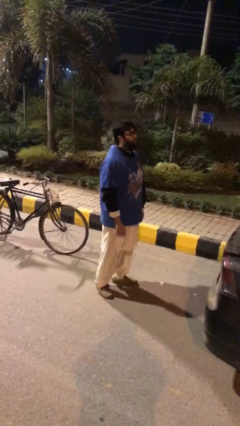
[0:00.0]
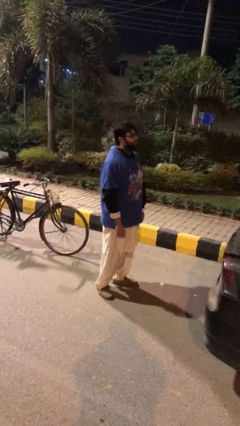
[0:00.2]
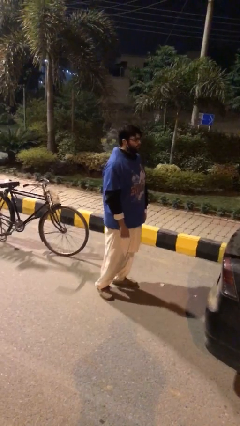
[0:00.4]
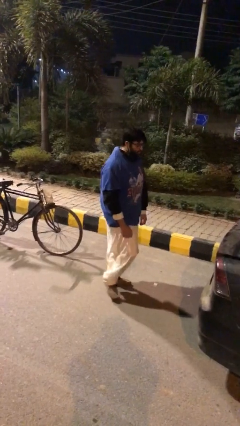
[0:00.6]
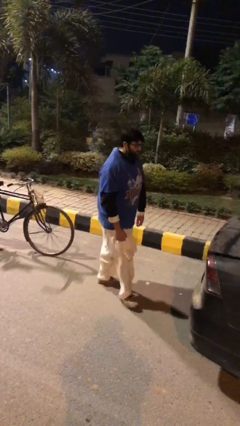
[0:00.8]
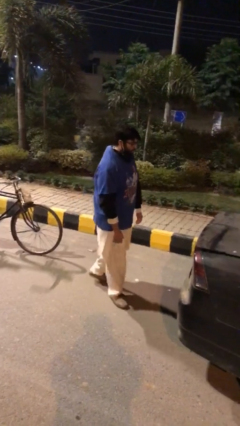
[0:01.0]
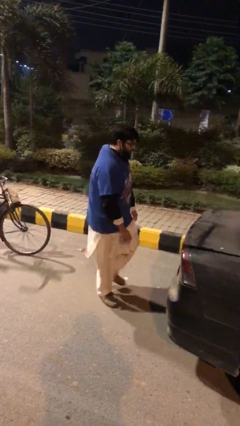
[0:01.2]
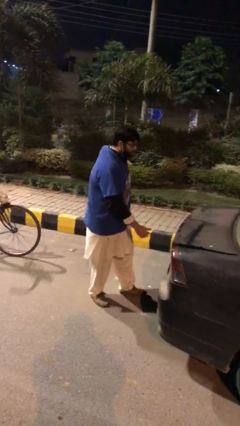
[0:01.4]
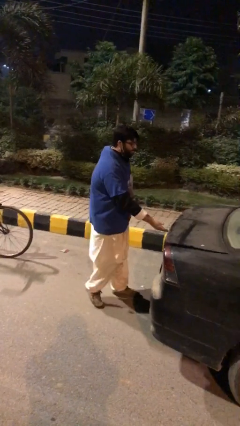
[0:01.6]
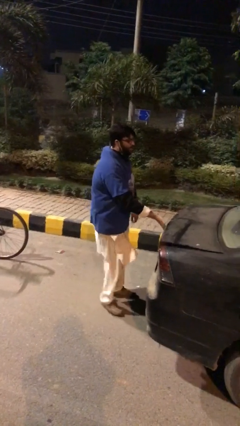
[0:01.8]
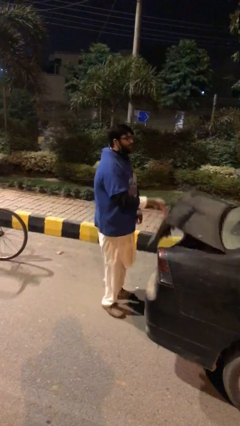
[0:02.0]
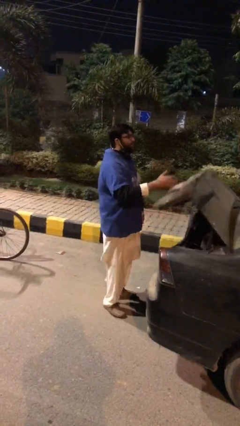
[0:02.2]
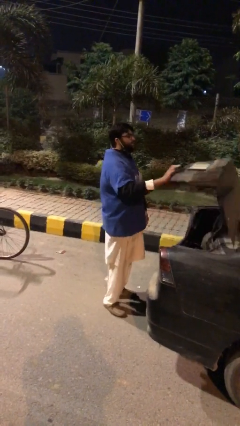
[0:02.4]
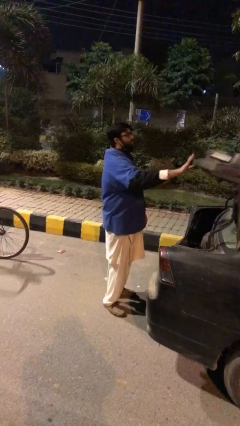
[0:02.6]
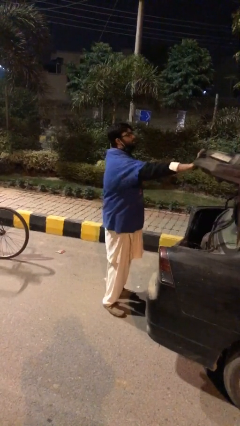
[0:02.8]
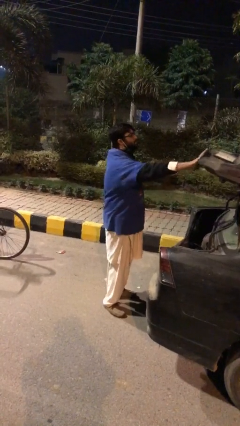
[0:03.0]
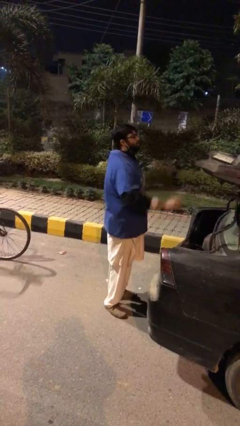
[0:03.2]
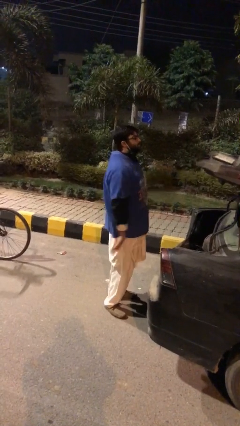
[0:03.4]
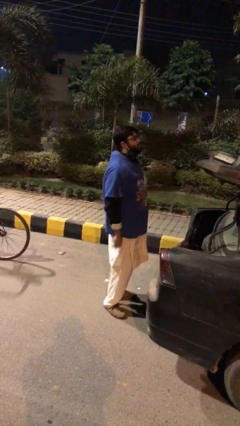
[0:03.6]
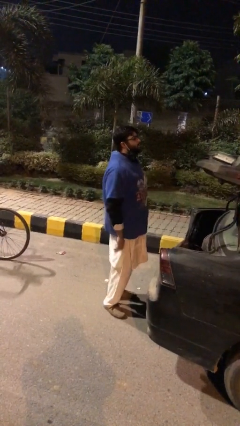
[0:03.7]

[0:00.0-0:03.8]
person opens car trunk

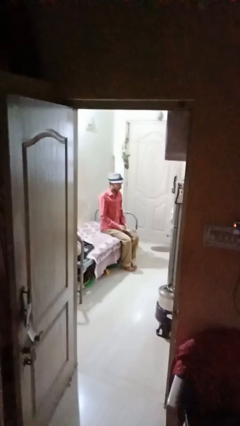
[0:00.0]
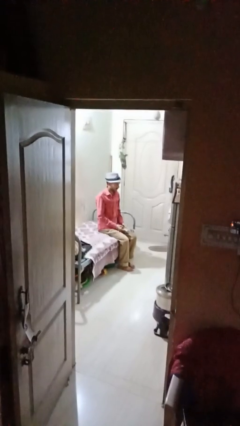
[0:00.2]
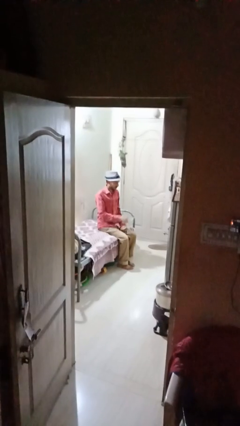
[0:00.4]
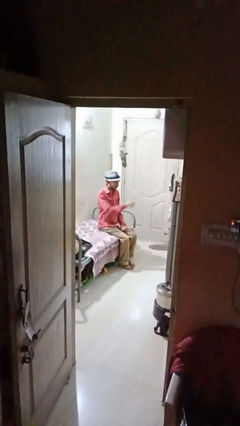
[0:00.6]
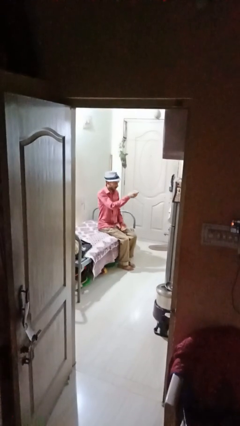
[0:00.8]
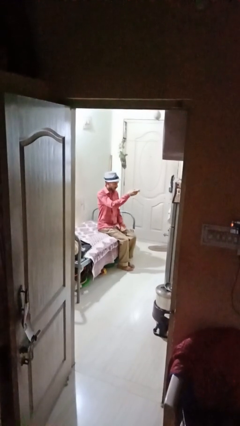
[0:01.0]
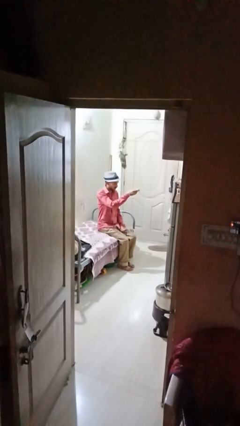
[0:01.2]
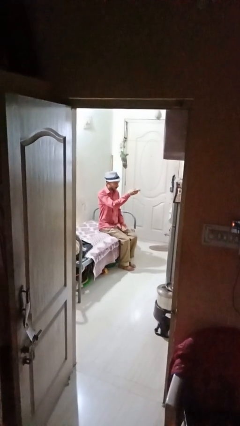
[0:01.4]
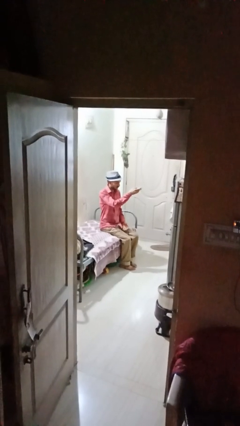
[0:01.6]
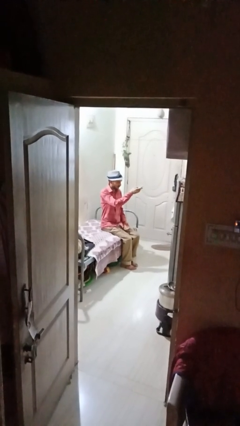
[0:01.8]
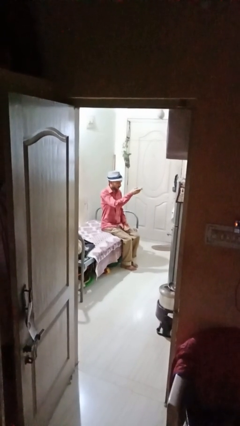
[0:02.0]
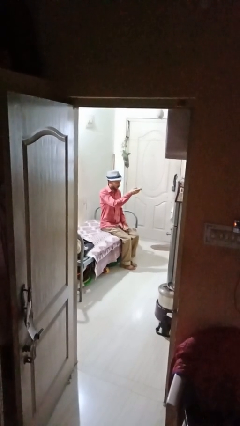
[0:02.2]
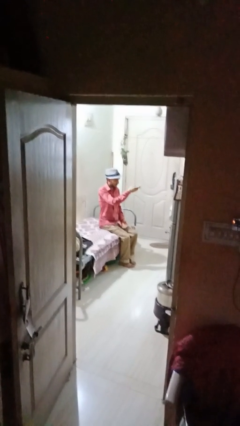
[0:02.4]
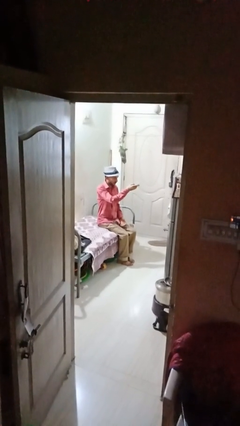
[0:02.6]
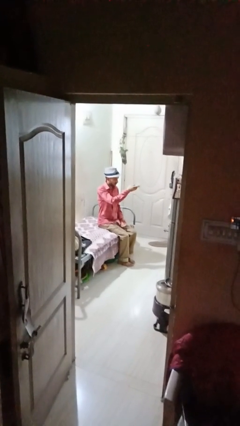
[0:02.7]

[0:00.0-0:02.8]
person uses television remote

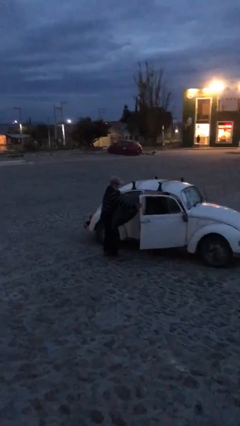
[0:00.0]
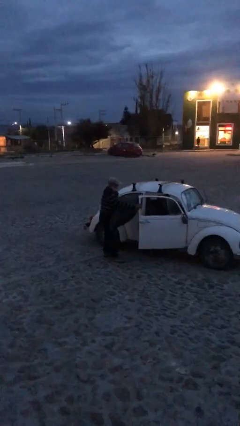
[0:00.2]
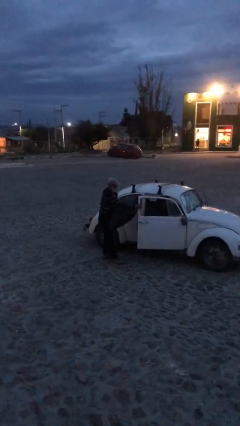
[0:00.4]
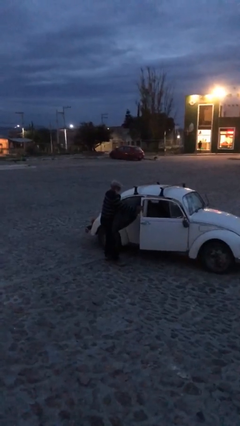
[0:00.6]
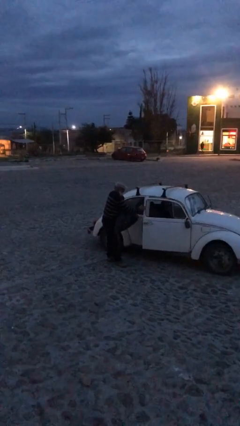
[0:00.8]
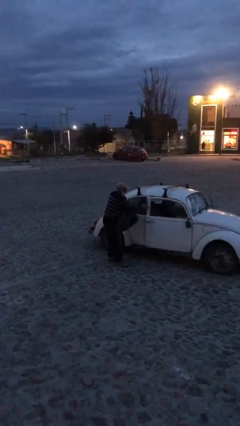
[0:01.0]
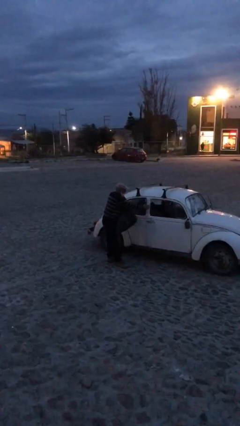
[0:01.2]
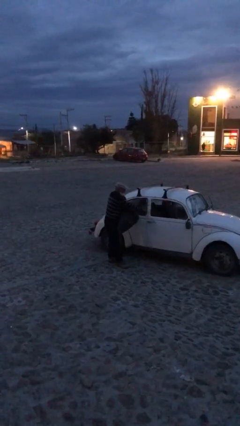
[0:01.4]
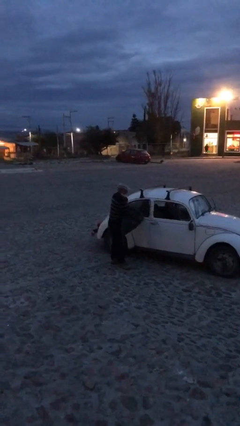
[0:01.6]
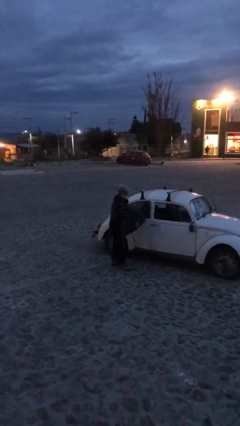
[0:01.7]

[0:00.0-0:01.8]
person closes car door

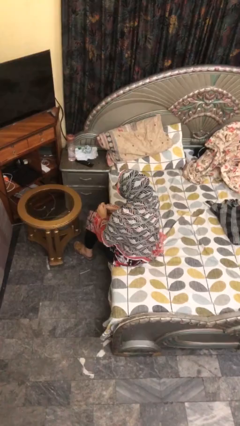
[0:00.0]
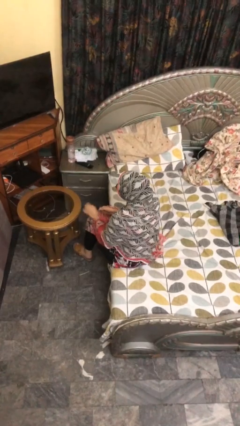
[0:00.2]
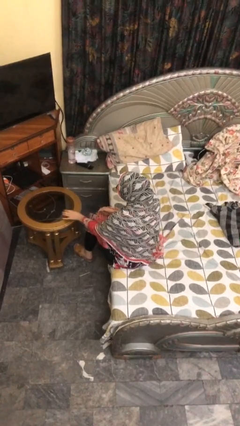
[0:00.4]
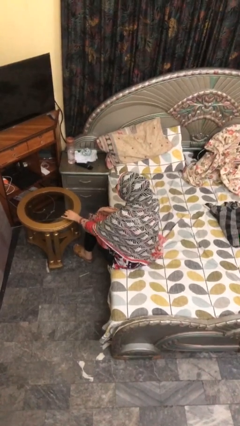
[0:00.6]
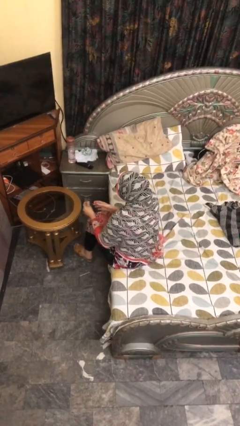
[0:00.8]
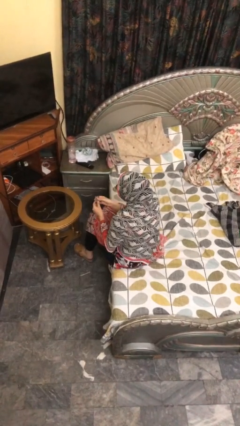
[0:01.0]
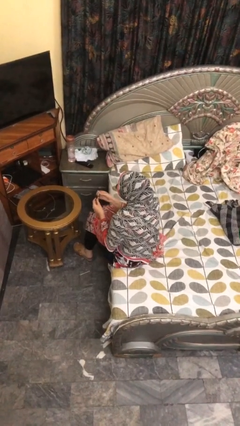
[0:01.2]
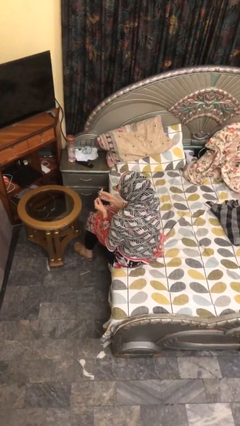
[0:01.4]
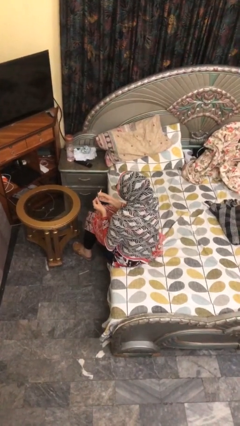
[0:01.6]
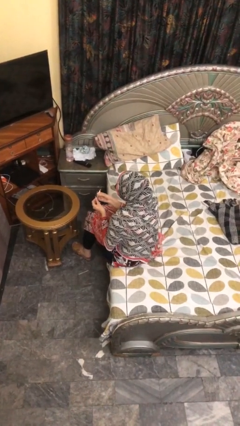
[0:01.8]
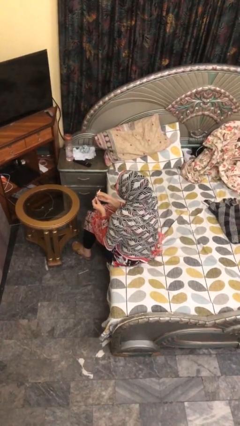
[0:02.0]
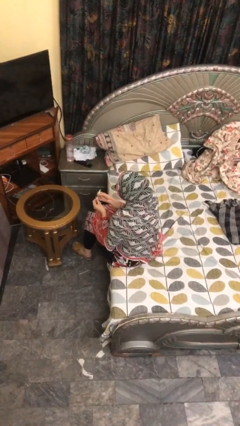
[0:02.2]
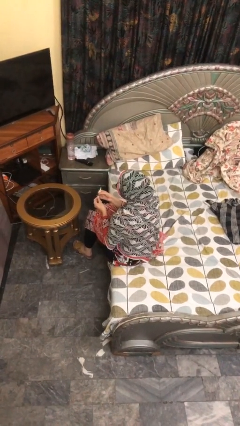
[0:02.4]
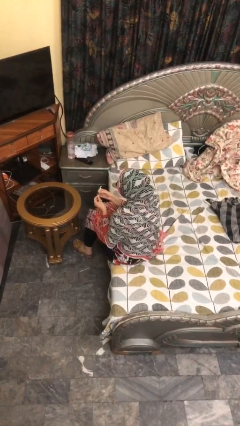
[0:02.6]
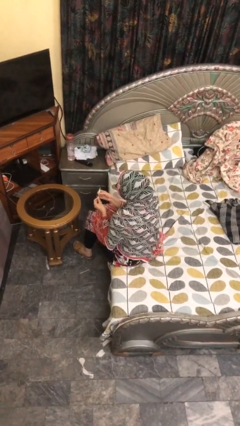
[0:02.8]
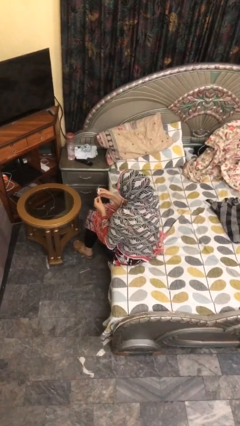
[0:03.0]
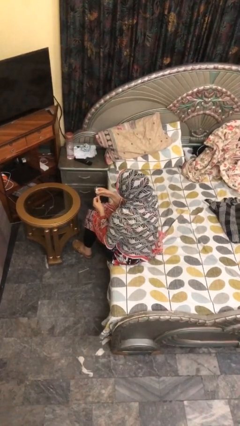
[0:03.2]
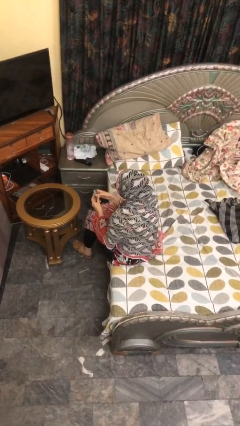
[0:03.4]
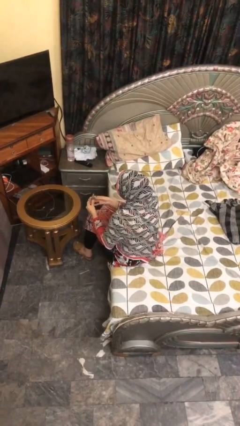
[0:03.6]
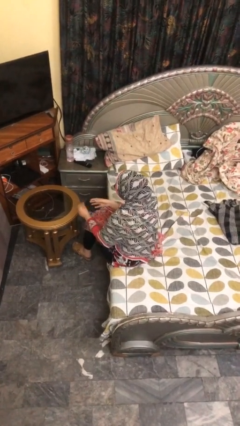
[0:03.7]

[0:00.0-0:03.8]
person clips fingernails

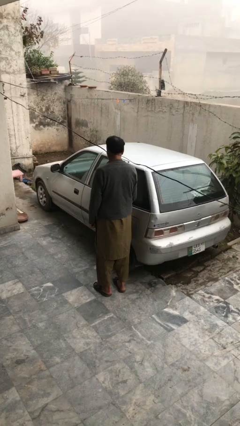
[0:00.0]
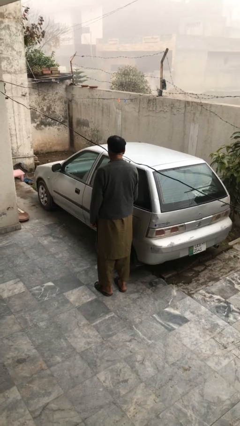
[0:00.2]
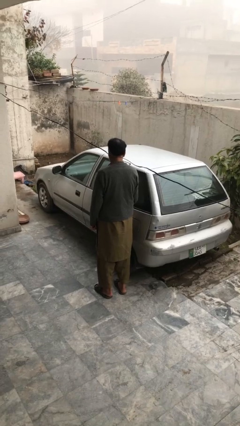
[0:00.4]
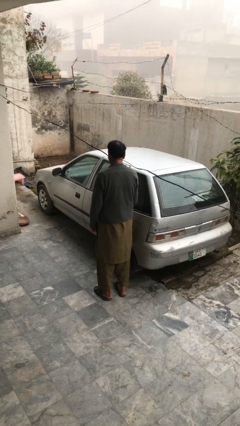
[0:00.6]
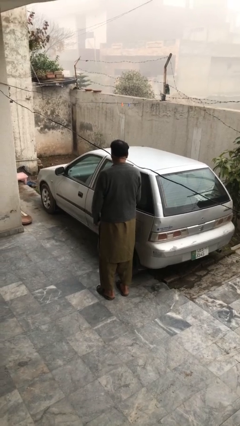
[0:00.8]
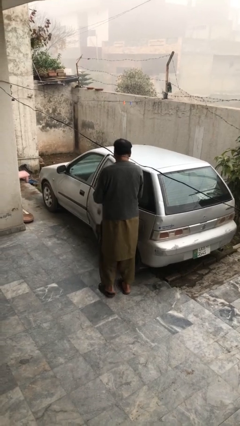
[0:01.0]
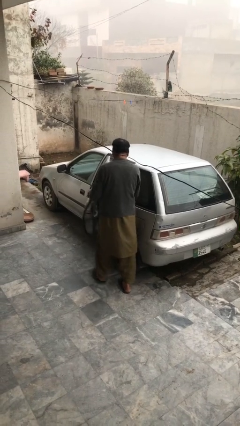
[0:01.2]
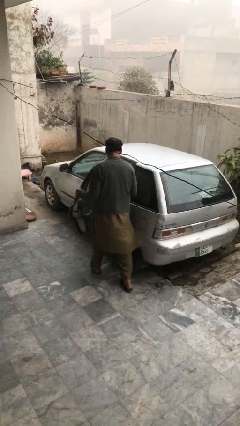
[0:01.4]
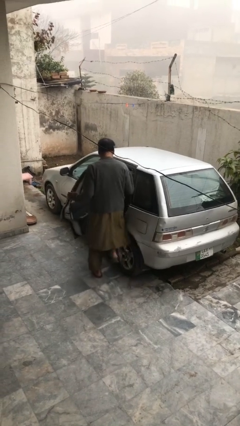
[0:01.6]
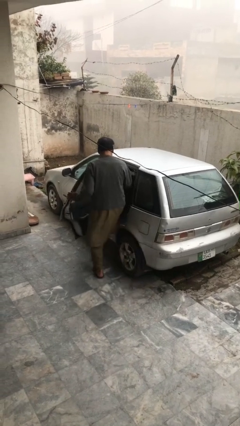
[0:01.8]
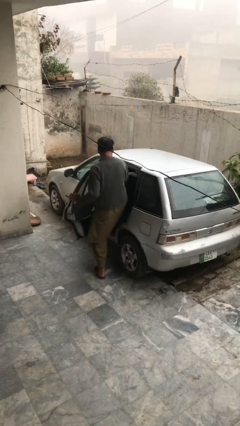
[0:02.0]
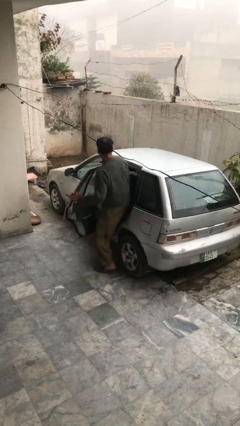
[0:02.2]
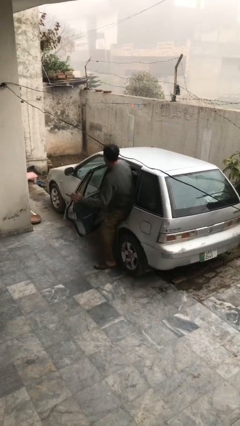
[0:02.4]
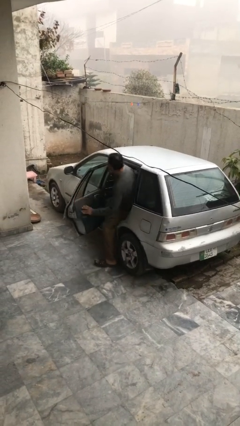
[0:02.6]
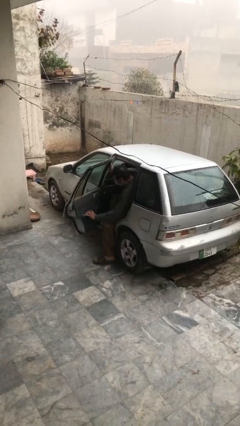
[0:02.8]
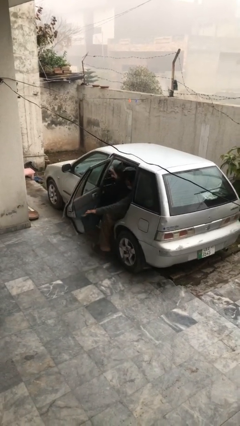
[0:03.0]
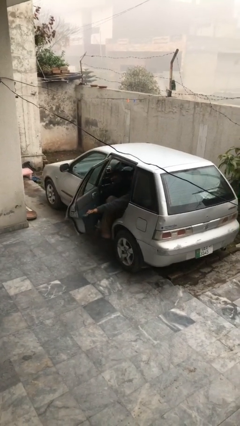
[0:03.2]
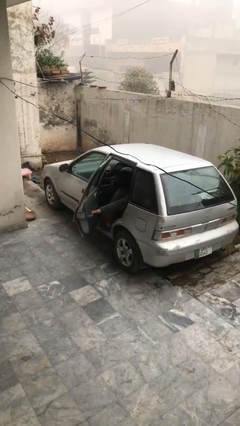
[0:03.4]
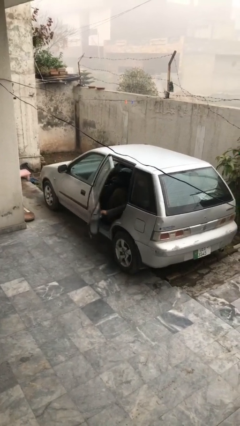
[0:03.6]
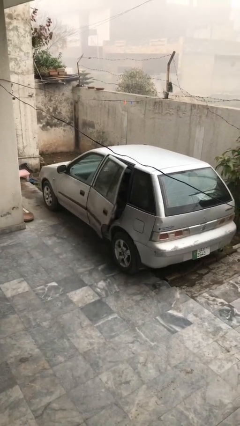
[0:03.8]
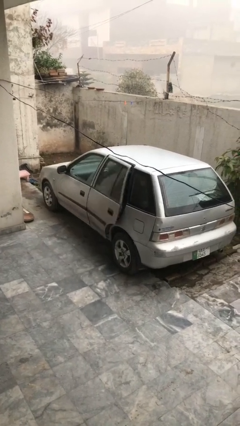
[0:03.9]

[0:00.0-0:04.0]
car picks up person

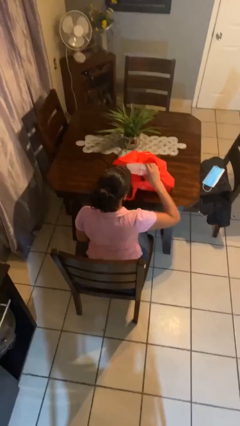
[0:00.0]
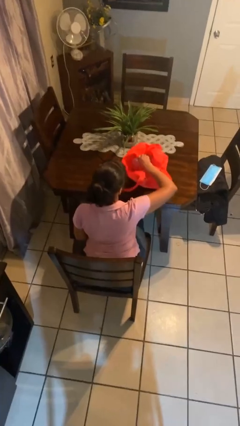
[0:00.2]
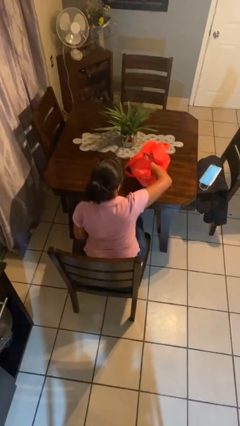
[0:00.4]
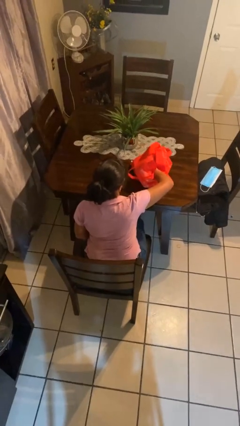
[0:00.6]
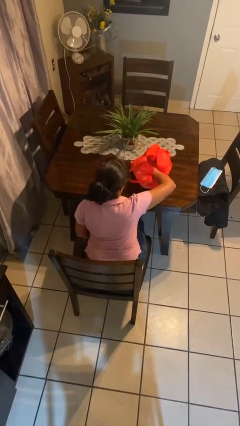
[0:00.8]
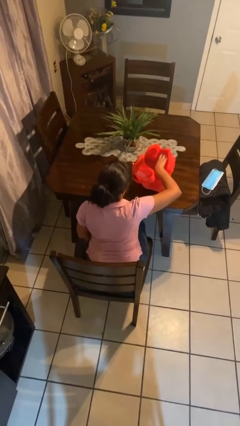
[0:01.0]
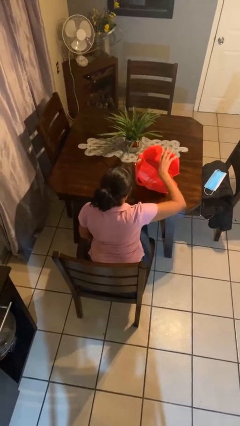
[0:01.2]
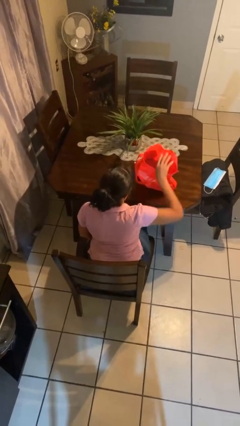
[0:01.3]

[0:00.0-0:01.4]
person puts object into bag
